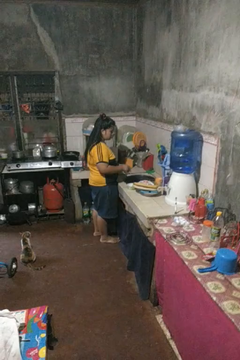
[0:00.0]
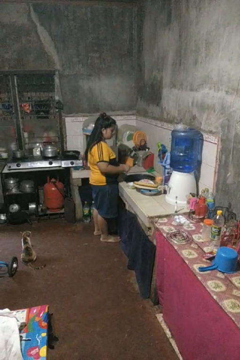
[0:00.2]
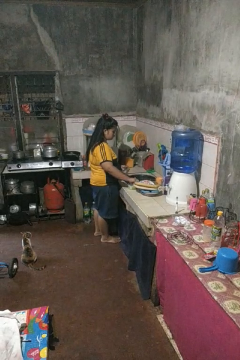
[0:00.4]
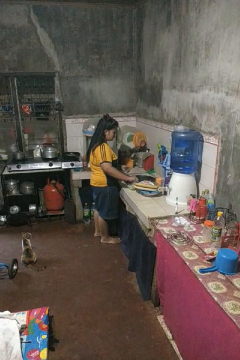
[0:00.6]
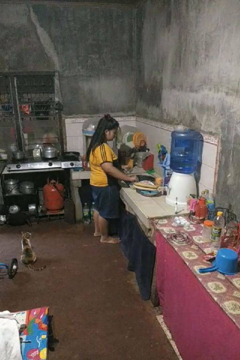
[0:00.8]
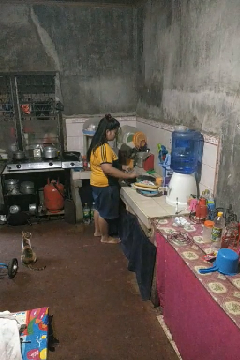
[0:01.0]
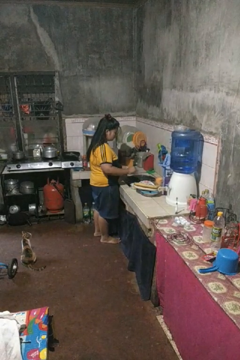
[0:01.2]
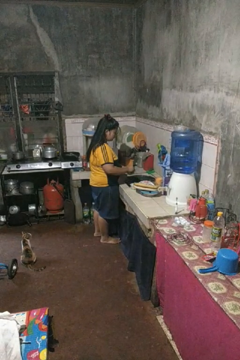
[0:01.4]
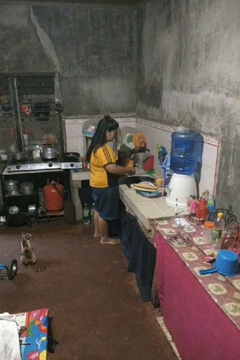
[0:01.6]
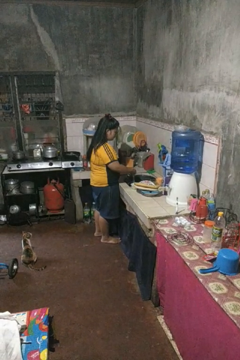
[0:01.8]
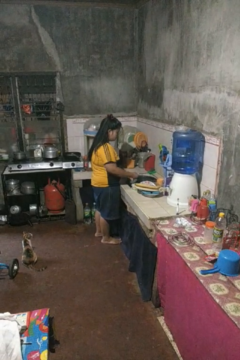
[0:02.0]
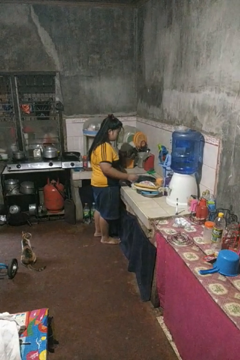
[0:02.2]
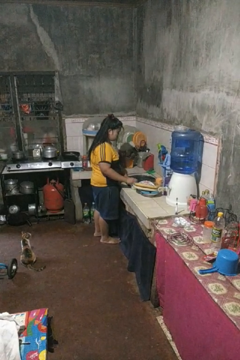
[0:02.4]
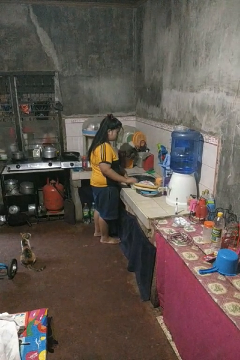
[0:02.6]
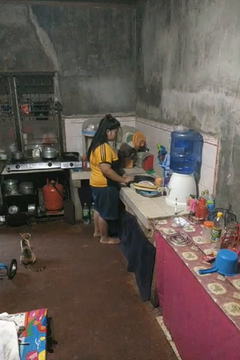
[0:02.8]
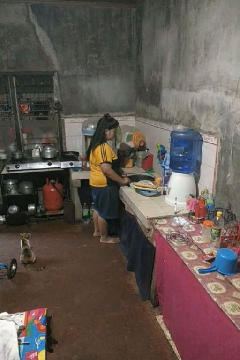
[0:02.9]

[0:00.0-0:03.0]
person washes dish

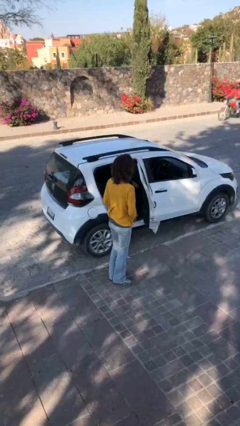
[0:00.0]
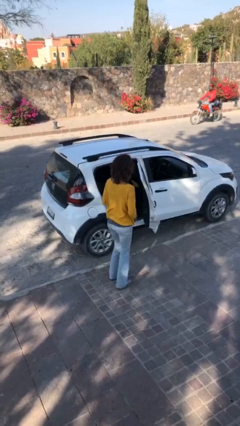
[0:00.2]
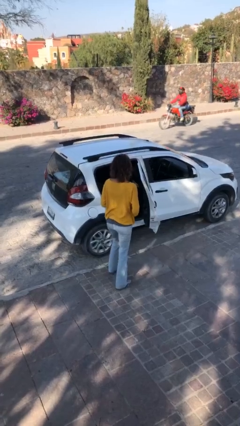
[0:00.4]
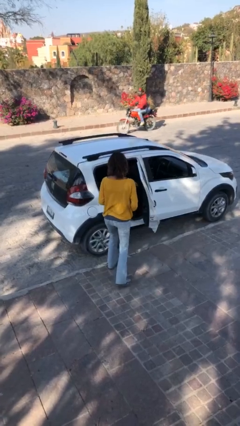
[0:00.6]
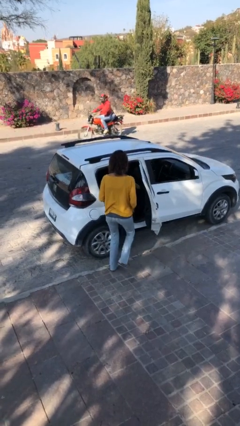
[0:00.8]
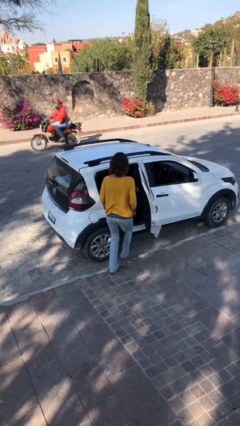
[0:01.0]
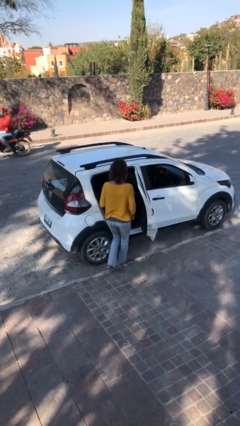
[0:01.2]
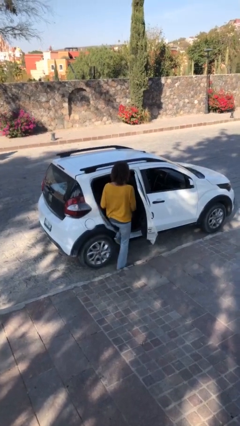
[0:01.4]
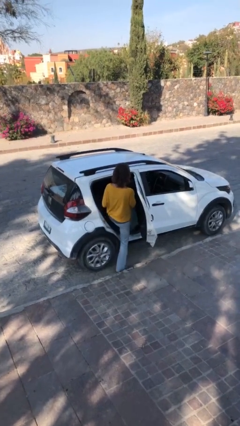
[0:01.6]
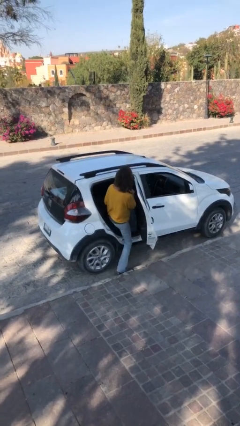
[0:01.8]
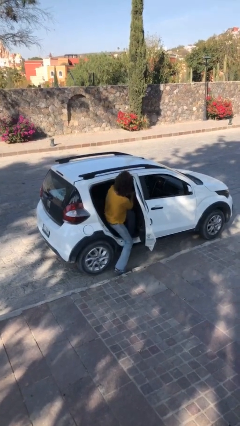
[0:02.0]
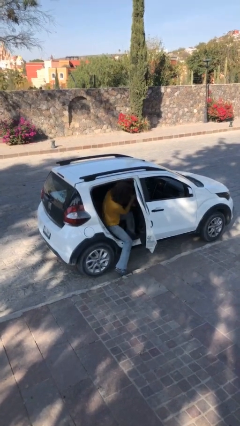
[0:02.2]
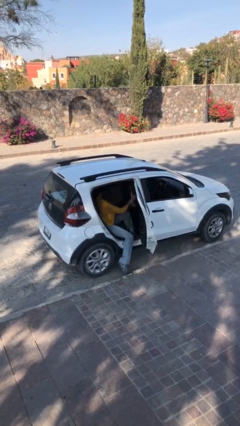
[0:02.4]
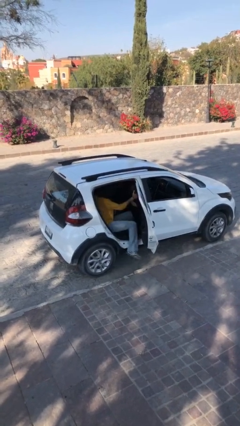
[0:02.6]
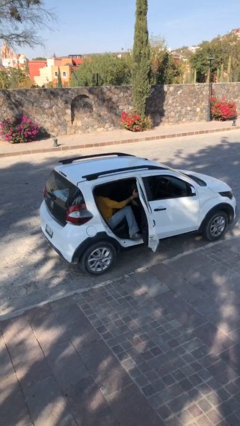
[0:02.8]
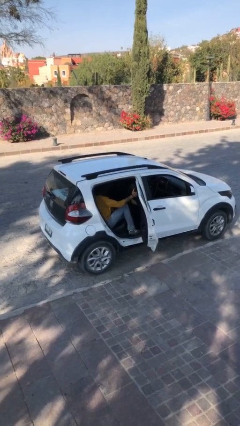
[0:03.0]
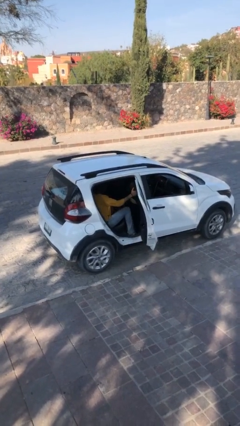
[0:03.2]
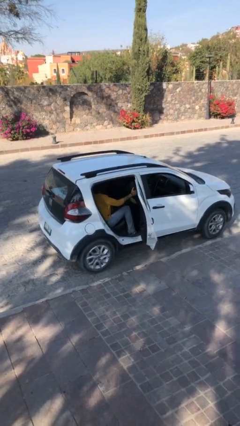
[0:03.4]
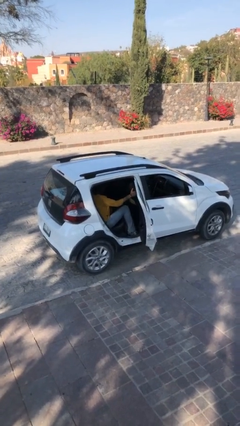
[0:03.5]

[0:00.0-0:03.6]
person enters car

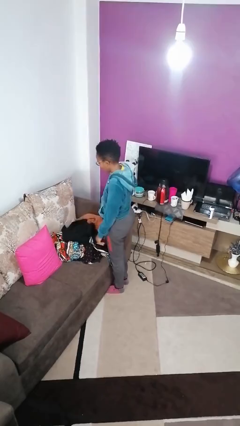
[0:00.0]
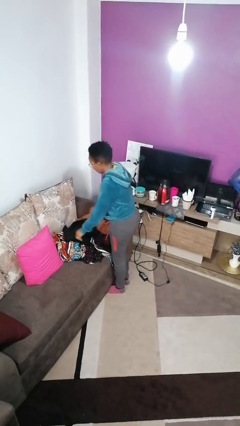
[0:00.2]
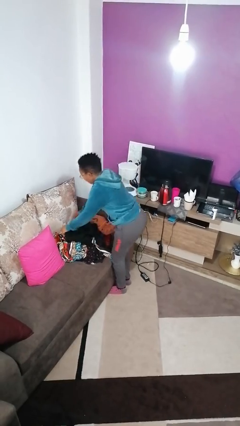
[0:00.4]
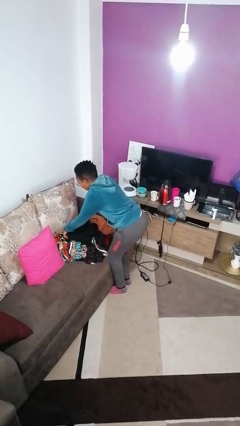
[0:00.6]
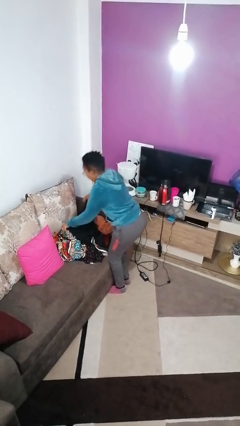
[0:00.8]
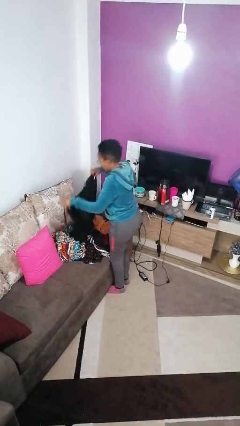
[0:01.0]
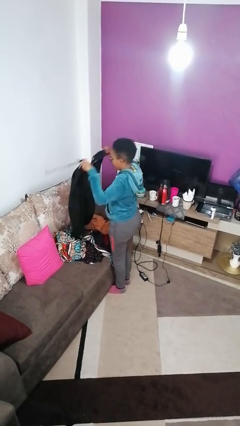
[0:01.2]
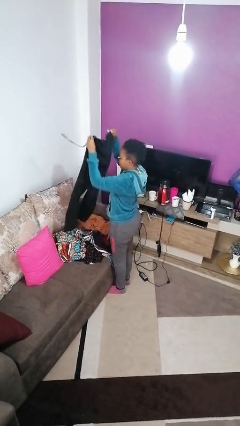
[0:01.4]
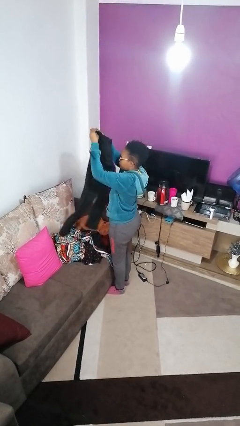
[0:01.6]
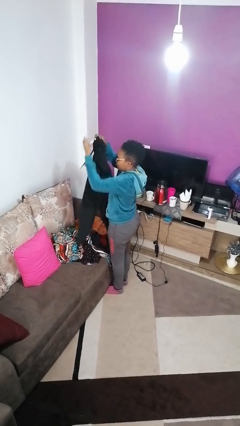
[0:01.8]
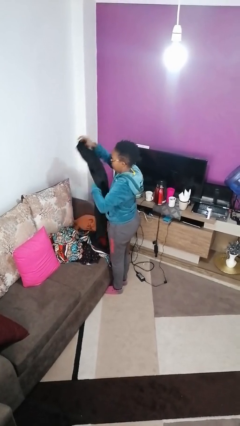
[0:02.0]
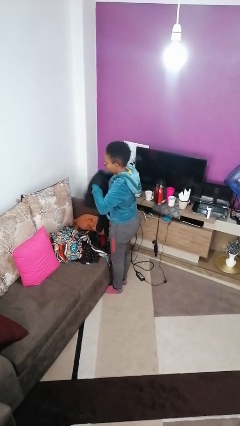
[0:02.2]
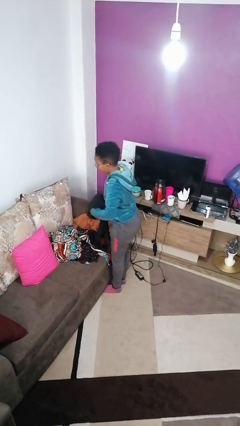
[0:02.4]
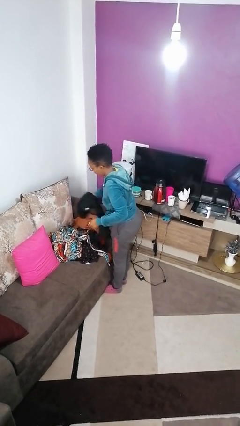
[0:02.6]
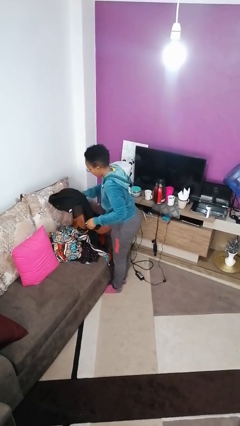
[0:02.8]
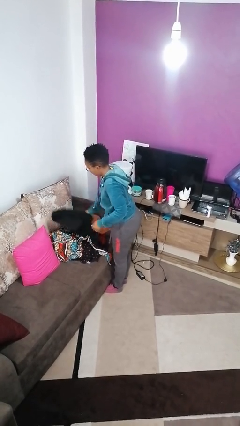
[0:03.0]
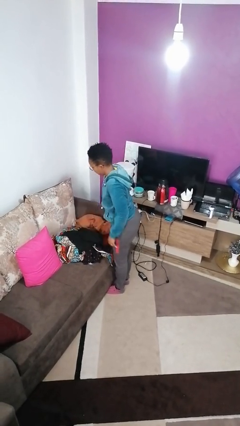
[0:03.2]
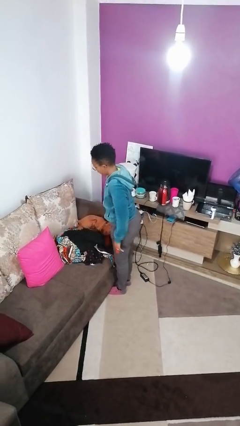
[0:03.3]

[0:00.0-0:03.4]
person folds pants

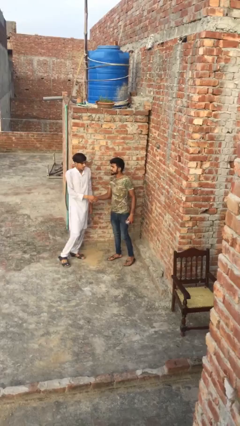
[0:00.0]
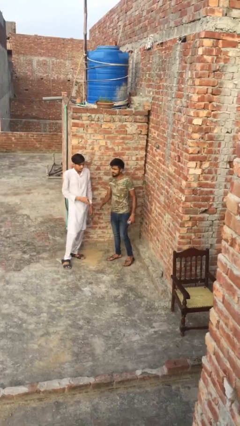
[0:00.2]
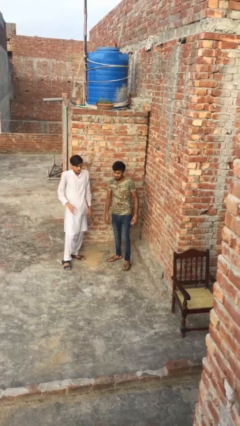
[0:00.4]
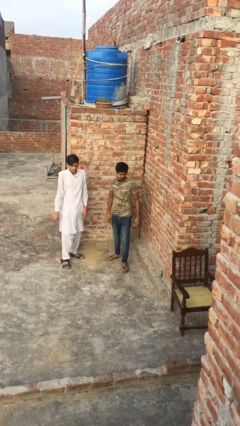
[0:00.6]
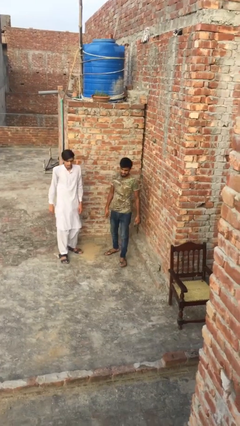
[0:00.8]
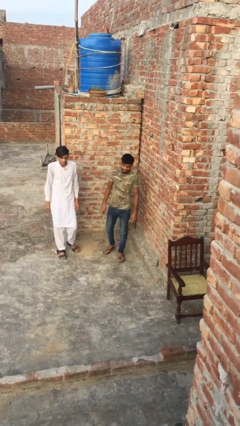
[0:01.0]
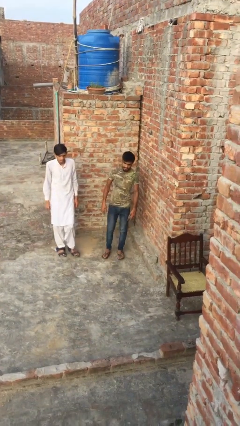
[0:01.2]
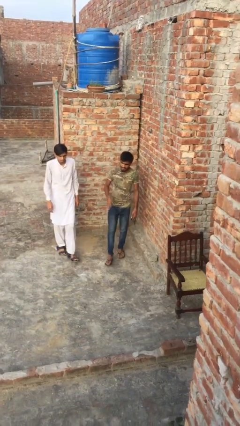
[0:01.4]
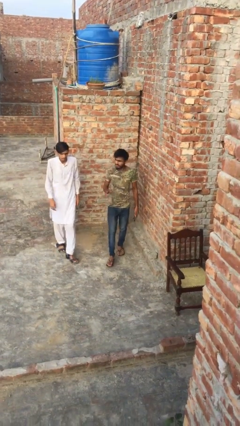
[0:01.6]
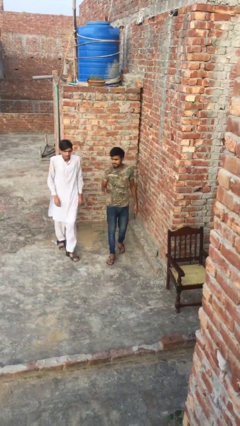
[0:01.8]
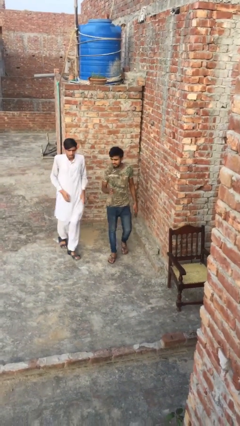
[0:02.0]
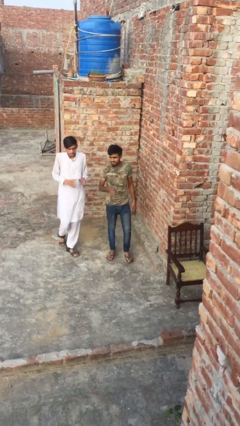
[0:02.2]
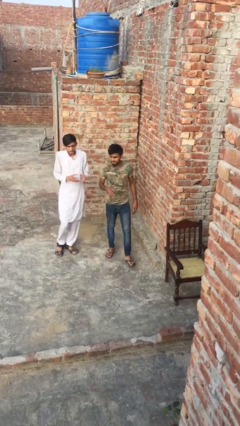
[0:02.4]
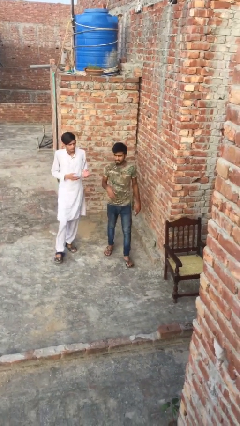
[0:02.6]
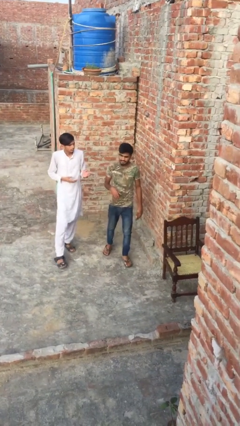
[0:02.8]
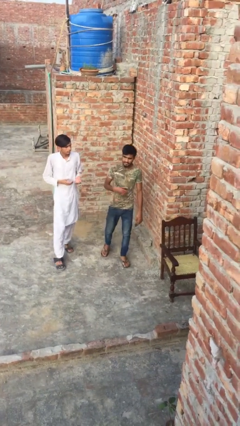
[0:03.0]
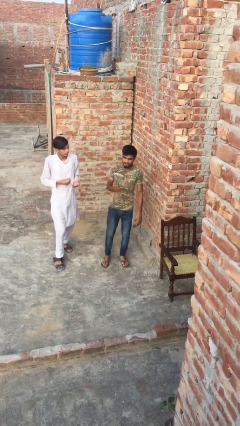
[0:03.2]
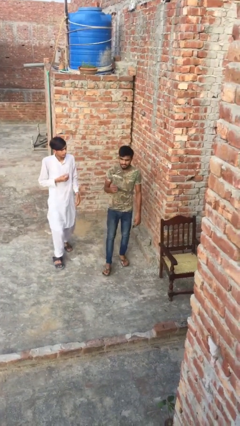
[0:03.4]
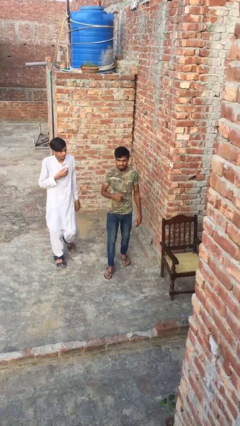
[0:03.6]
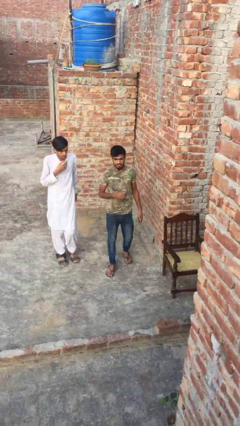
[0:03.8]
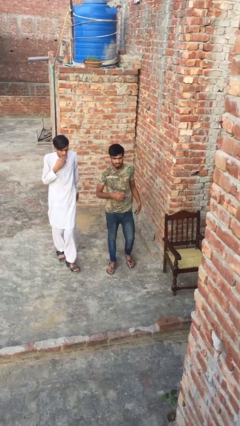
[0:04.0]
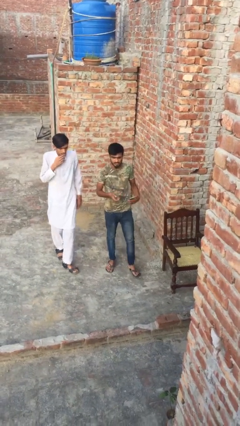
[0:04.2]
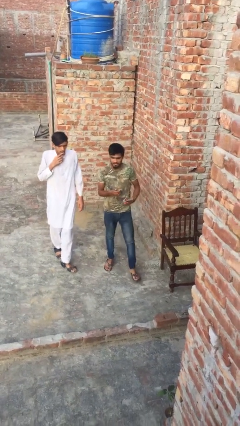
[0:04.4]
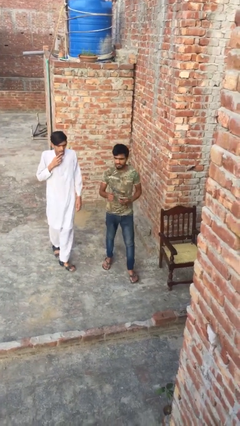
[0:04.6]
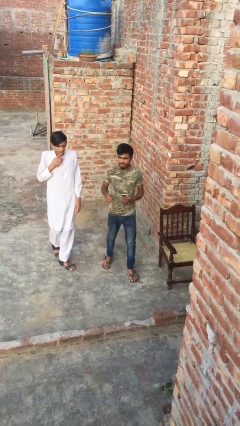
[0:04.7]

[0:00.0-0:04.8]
person talks to person

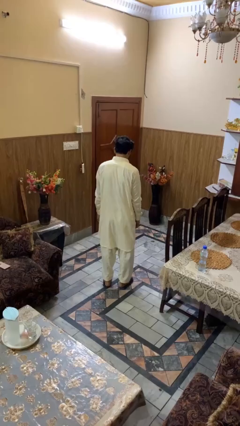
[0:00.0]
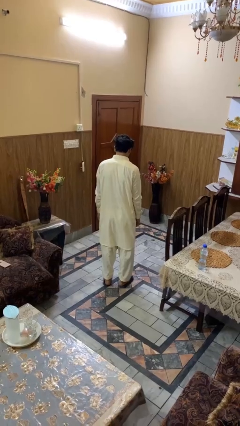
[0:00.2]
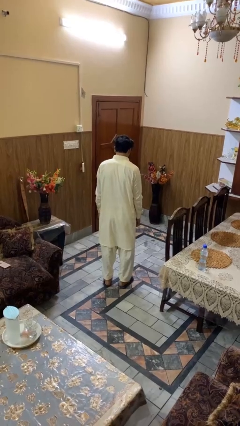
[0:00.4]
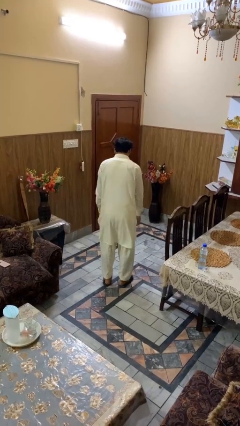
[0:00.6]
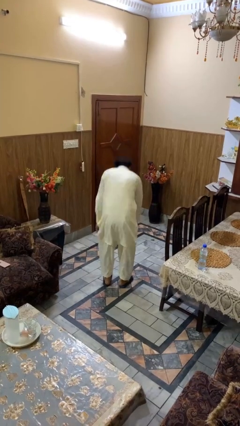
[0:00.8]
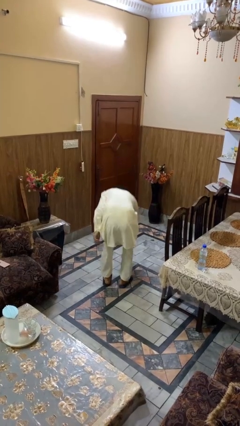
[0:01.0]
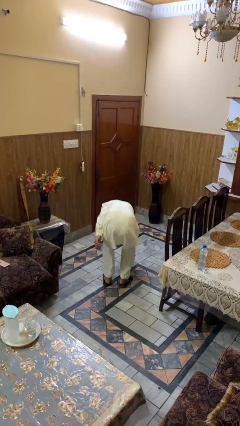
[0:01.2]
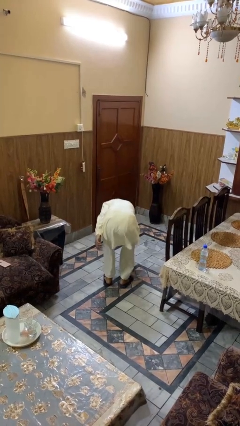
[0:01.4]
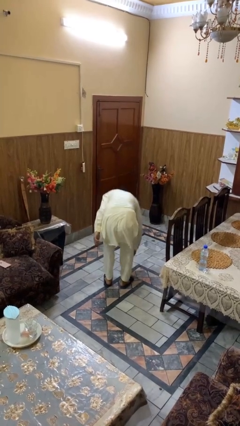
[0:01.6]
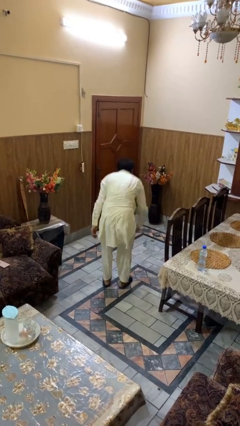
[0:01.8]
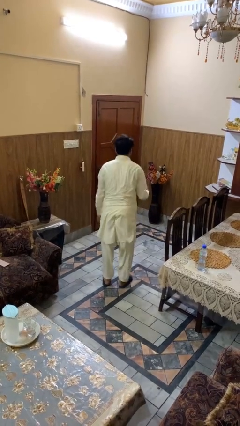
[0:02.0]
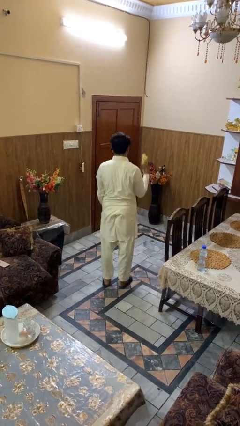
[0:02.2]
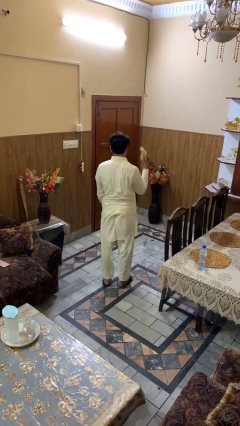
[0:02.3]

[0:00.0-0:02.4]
person picks up object from floor

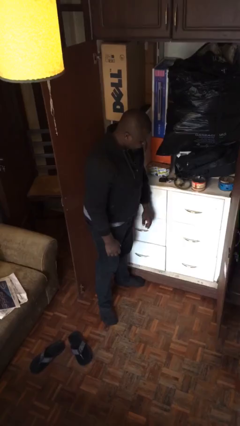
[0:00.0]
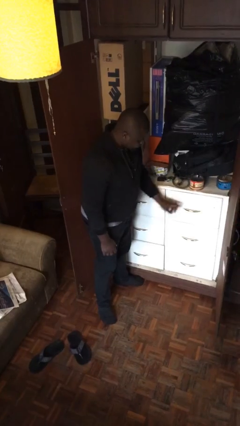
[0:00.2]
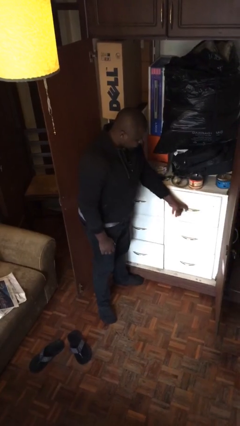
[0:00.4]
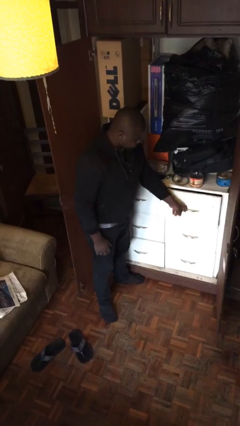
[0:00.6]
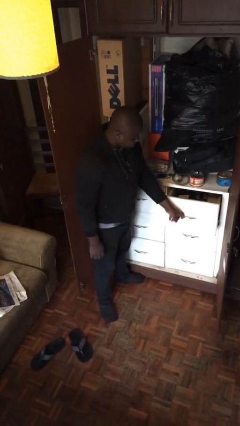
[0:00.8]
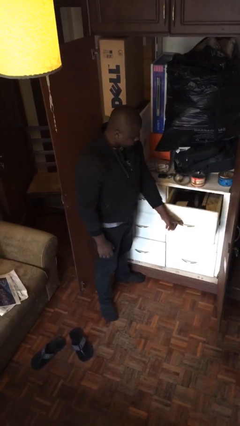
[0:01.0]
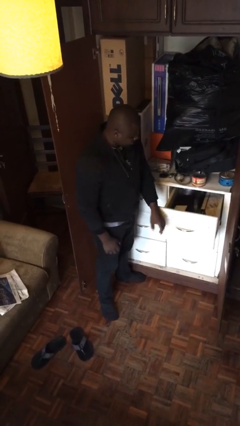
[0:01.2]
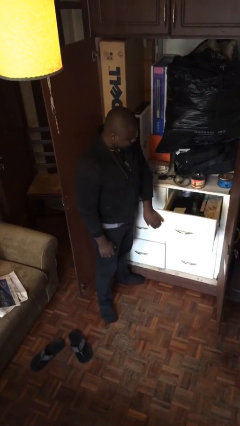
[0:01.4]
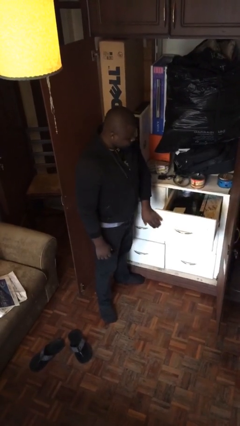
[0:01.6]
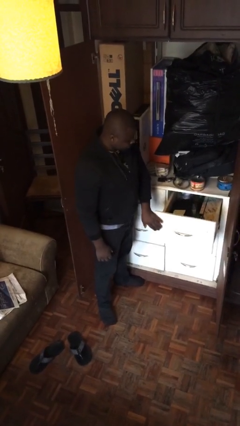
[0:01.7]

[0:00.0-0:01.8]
person opens dresser drawer
